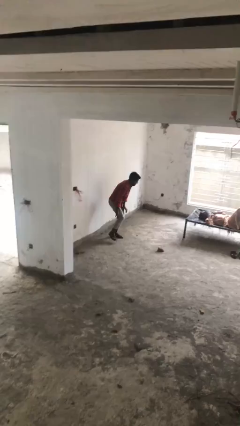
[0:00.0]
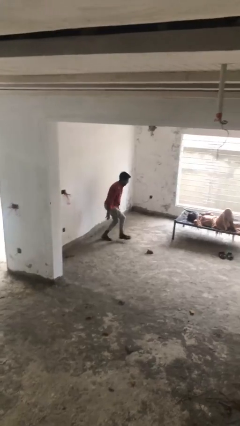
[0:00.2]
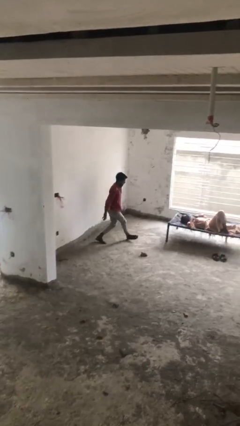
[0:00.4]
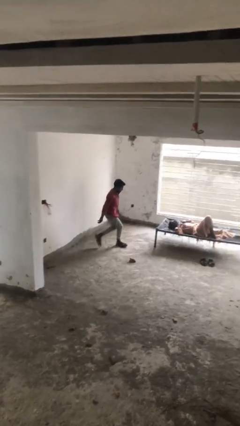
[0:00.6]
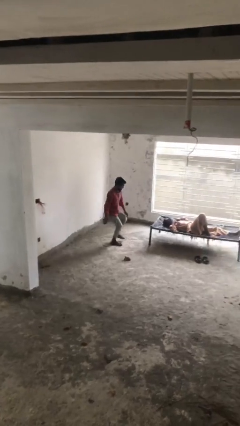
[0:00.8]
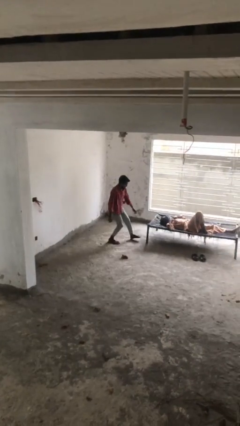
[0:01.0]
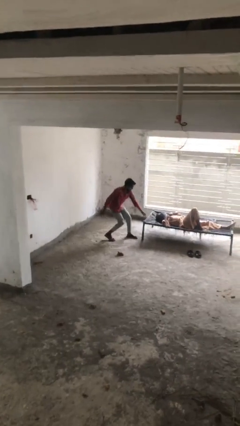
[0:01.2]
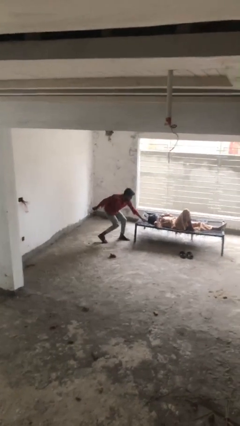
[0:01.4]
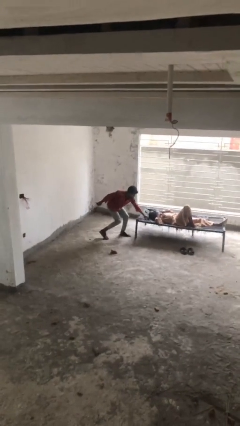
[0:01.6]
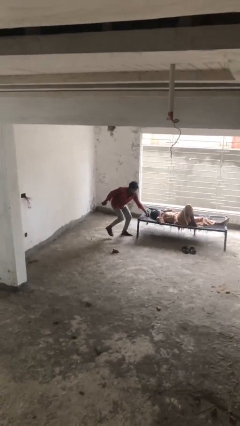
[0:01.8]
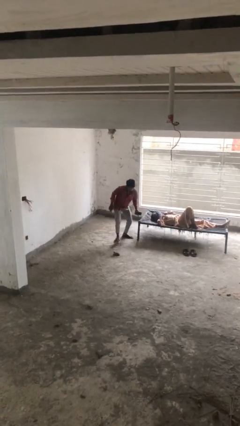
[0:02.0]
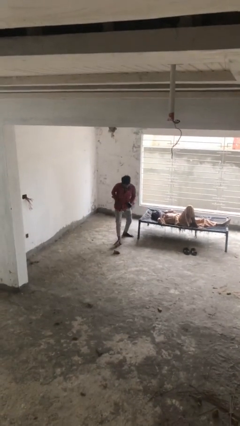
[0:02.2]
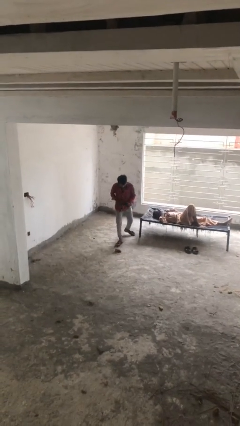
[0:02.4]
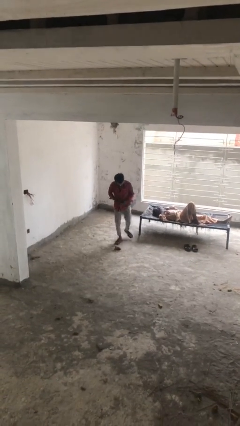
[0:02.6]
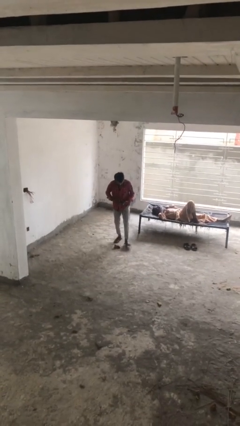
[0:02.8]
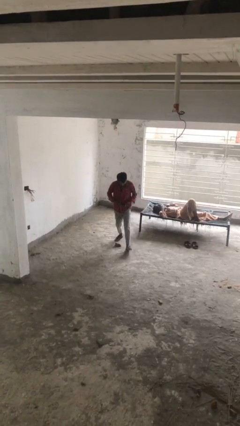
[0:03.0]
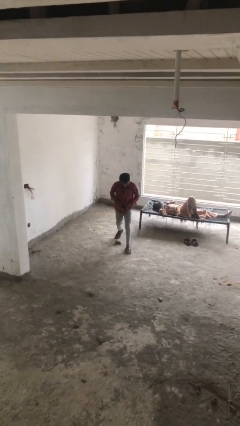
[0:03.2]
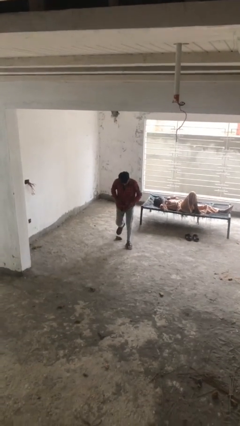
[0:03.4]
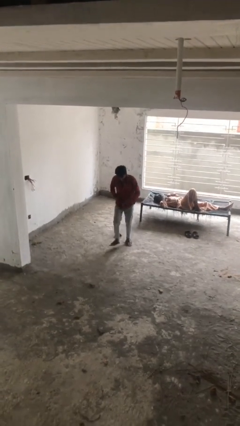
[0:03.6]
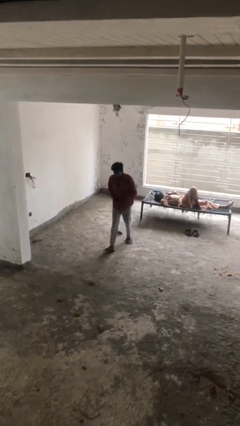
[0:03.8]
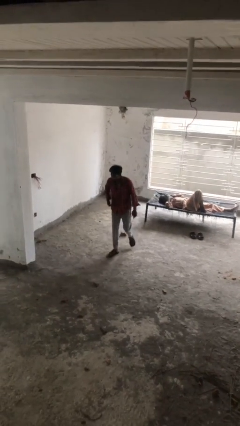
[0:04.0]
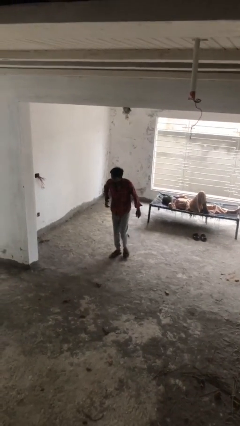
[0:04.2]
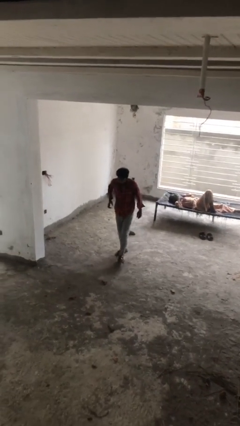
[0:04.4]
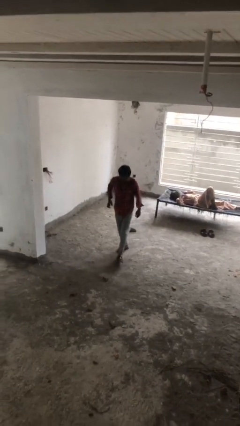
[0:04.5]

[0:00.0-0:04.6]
person steals object from person

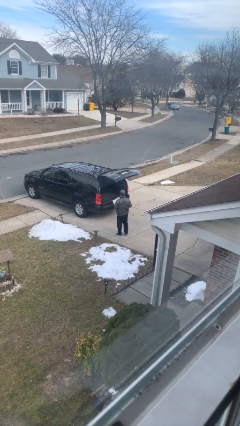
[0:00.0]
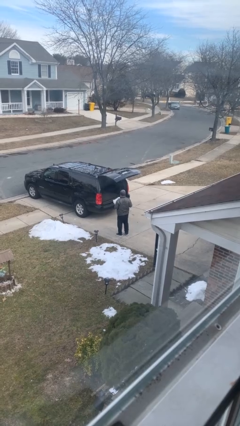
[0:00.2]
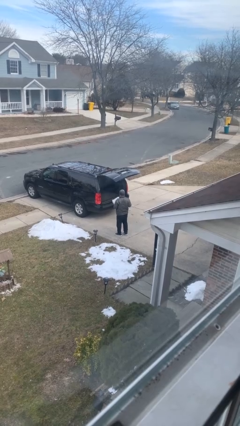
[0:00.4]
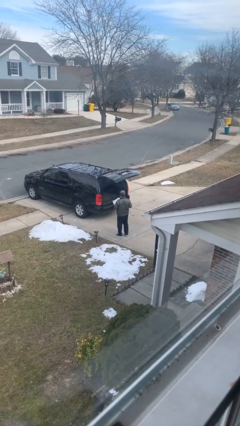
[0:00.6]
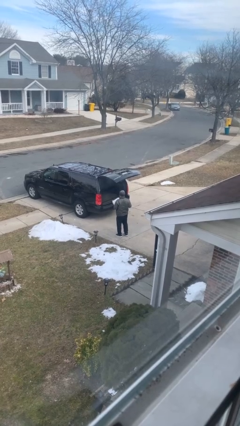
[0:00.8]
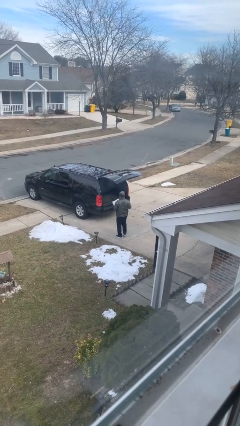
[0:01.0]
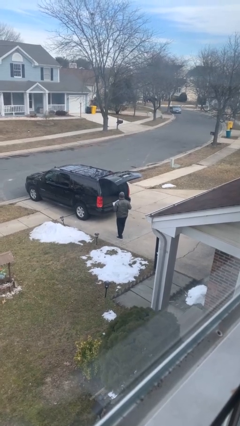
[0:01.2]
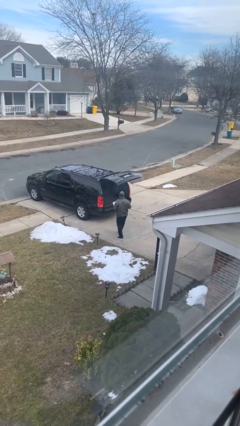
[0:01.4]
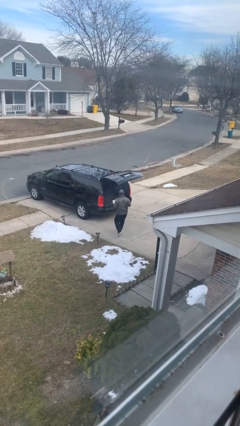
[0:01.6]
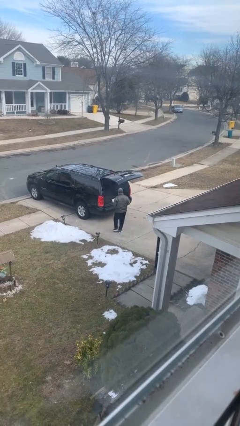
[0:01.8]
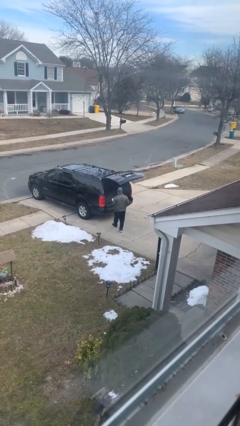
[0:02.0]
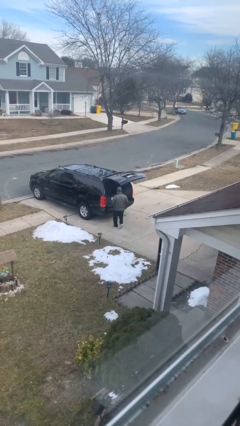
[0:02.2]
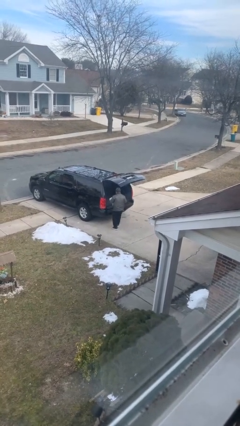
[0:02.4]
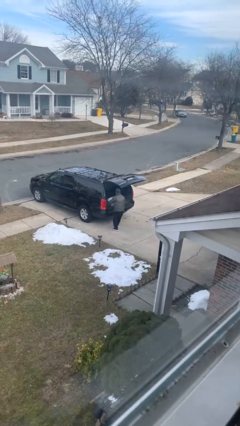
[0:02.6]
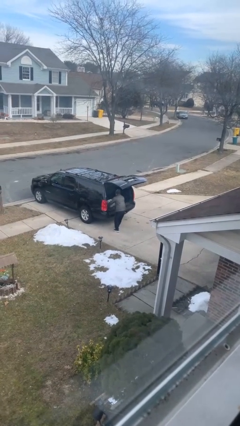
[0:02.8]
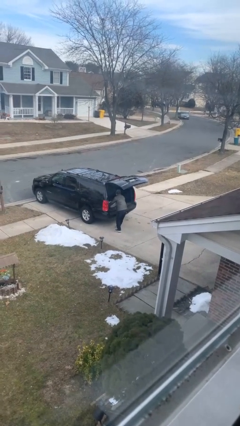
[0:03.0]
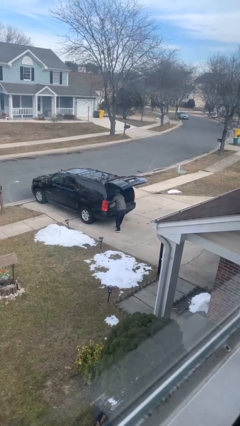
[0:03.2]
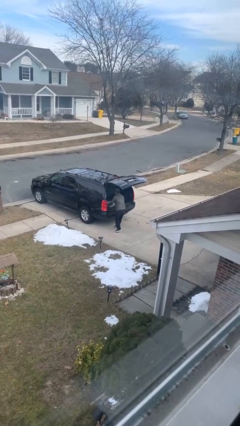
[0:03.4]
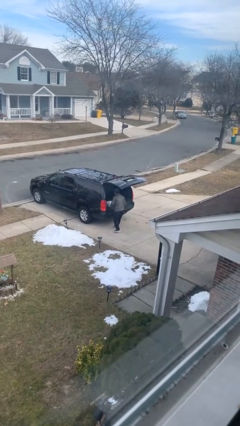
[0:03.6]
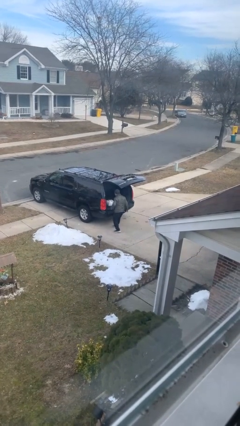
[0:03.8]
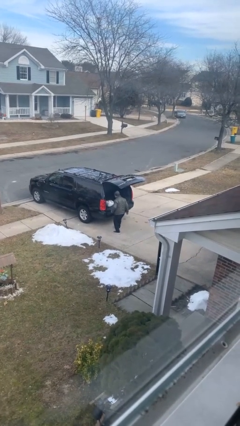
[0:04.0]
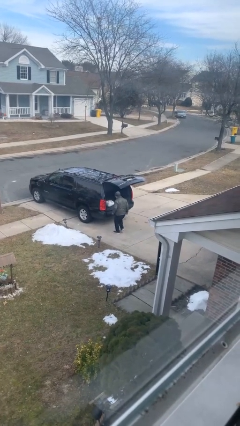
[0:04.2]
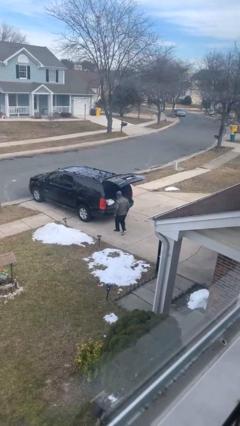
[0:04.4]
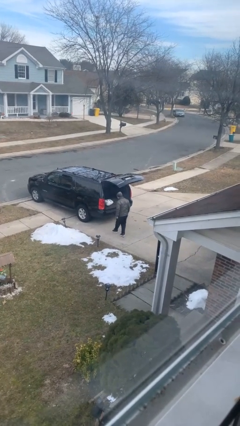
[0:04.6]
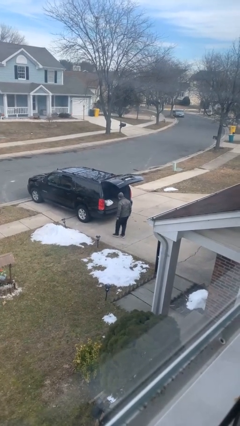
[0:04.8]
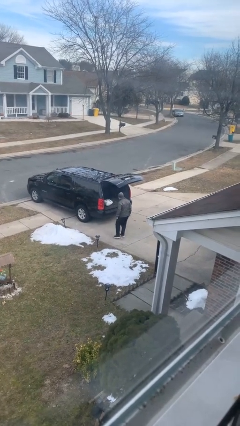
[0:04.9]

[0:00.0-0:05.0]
person loads car

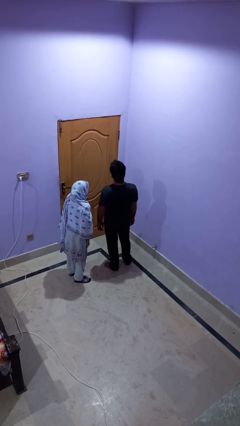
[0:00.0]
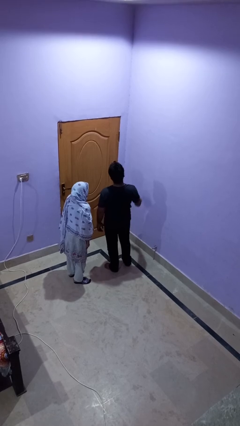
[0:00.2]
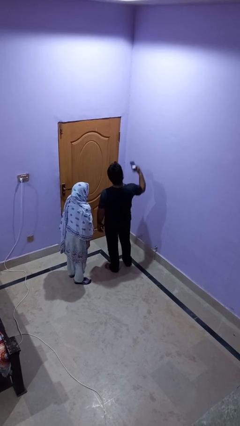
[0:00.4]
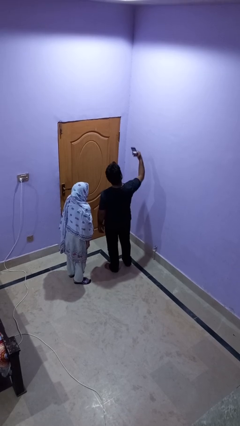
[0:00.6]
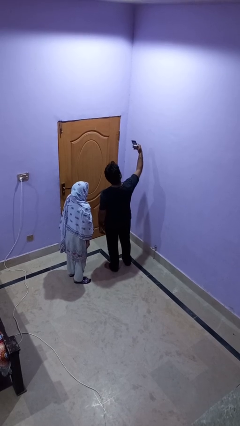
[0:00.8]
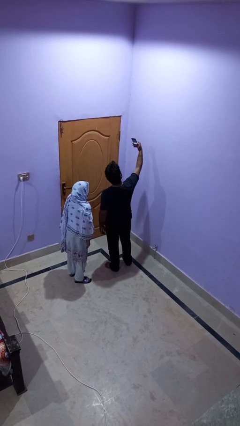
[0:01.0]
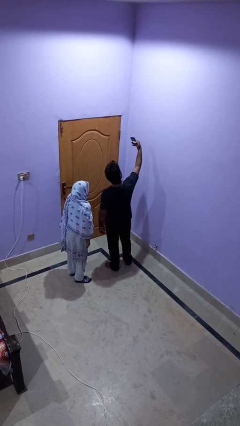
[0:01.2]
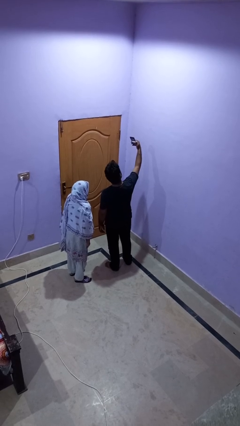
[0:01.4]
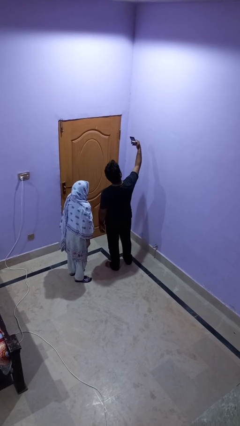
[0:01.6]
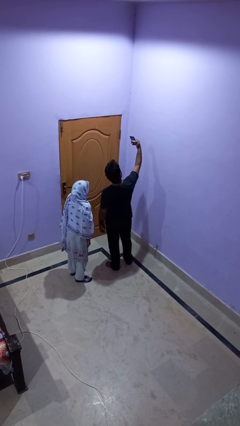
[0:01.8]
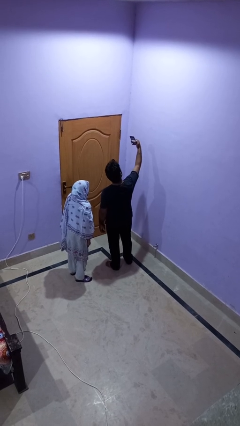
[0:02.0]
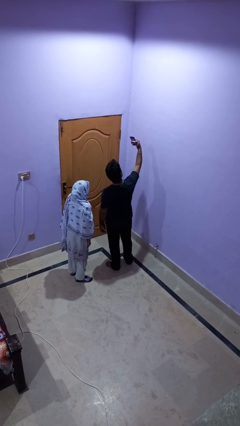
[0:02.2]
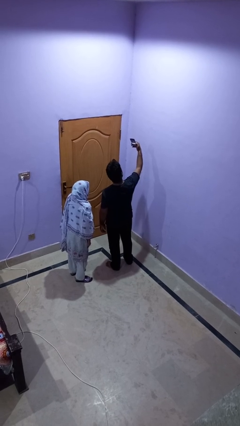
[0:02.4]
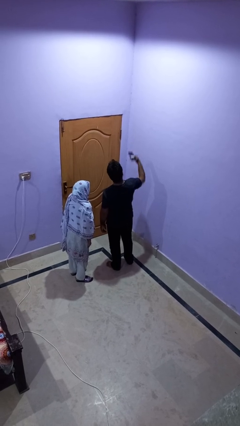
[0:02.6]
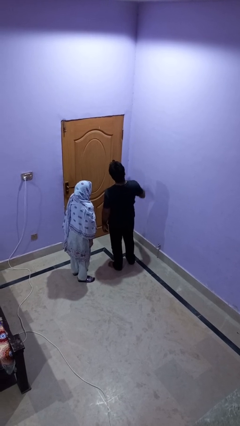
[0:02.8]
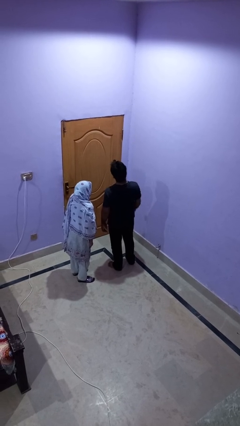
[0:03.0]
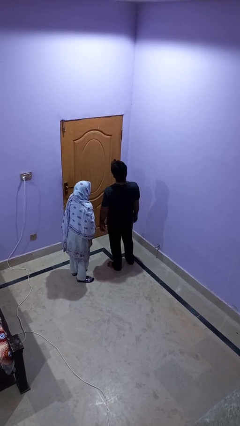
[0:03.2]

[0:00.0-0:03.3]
person takes selfie with person

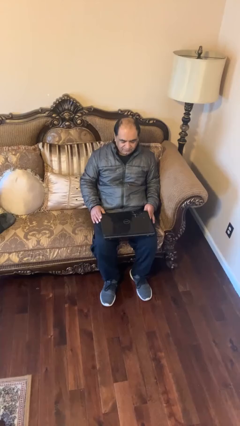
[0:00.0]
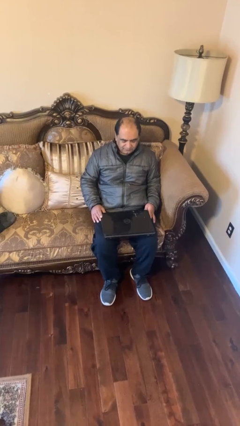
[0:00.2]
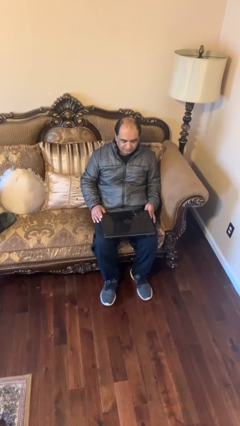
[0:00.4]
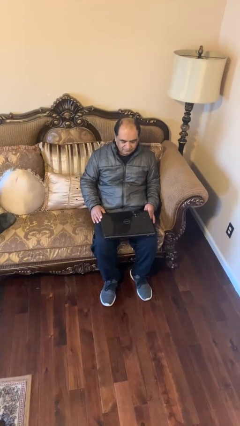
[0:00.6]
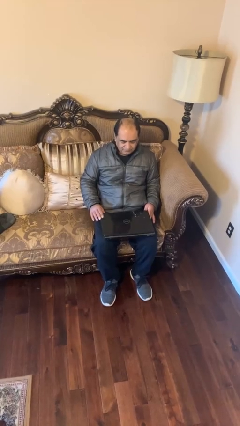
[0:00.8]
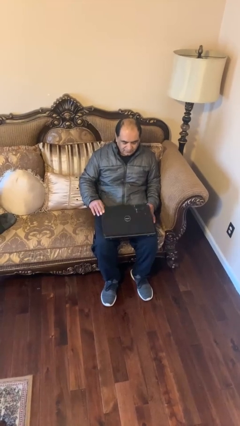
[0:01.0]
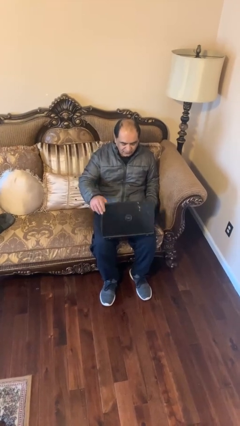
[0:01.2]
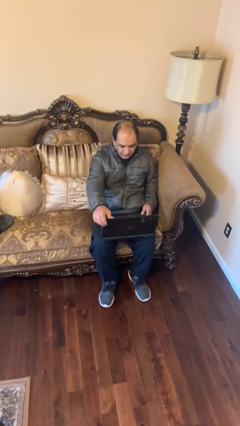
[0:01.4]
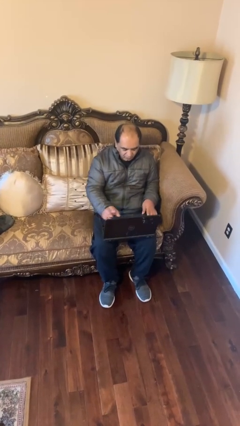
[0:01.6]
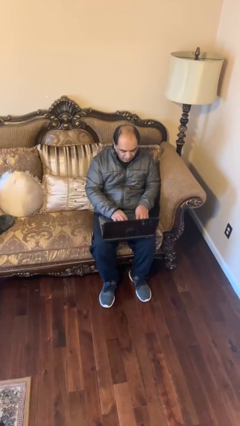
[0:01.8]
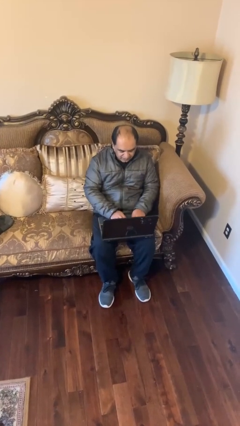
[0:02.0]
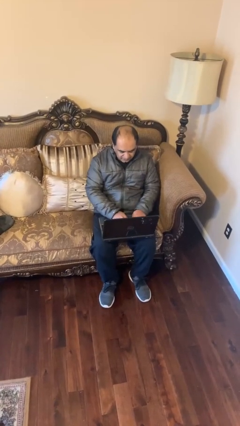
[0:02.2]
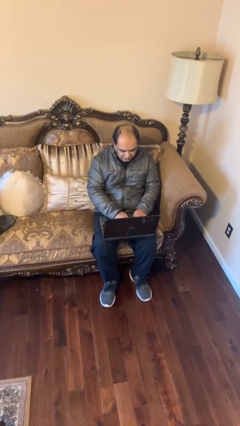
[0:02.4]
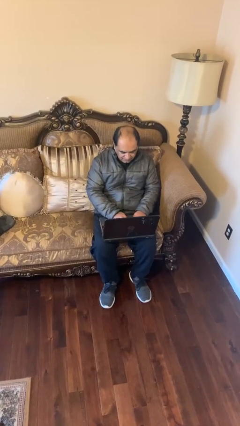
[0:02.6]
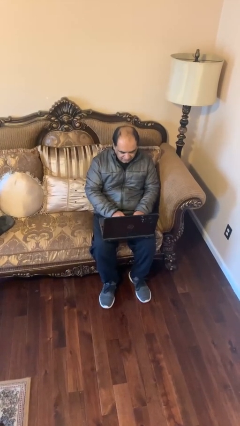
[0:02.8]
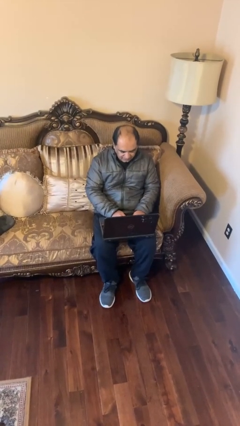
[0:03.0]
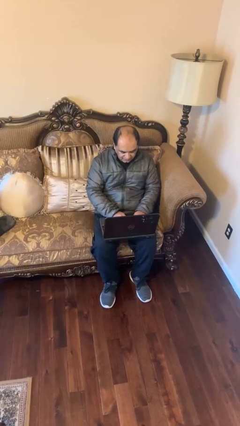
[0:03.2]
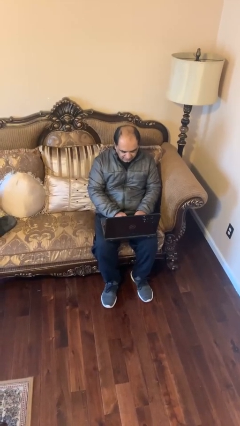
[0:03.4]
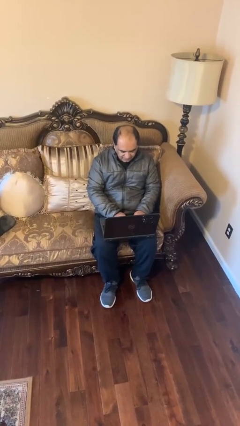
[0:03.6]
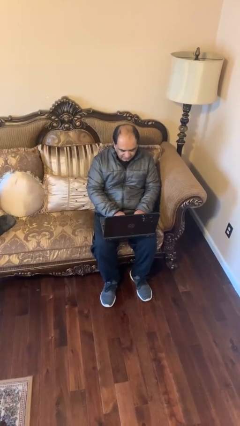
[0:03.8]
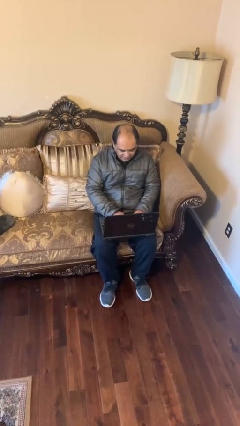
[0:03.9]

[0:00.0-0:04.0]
person interacts with laptop

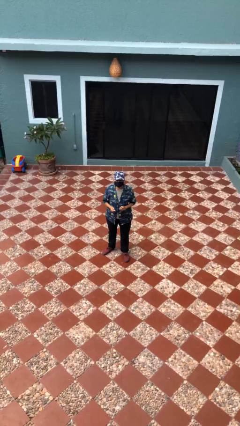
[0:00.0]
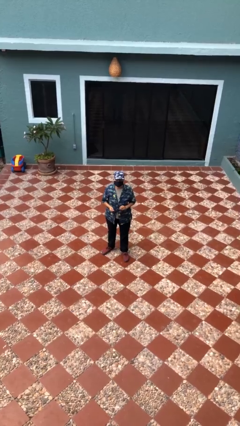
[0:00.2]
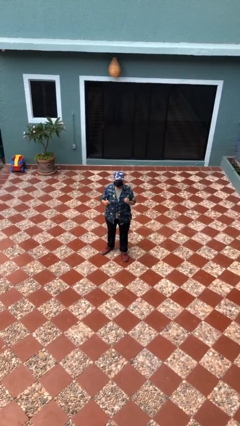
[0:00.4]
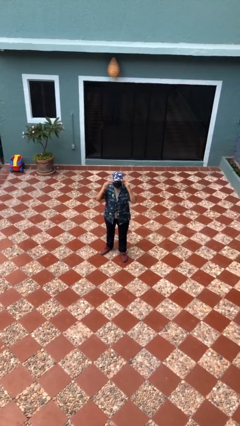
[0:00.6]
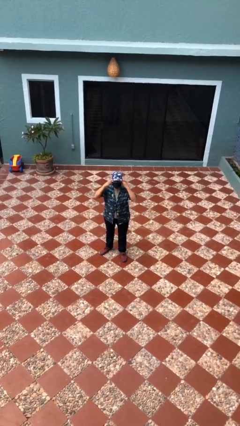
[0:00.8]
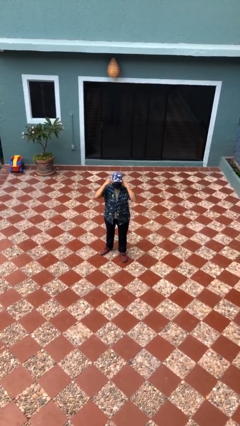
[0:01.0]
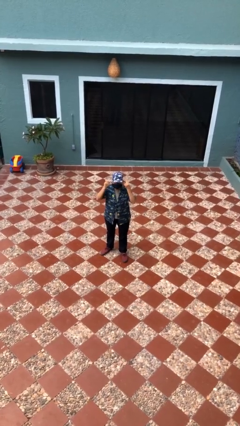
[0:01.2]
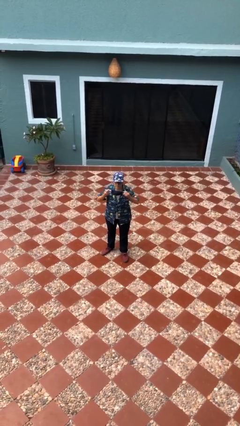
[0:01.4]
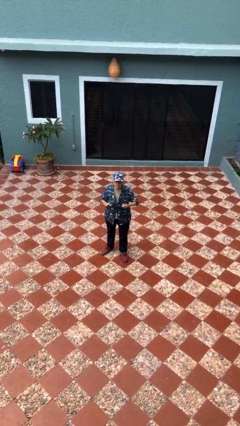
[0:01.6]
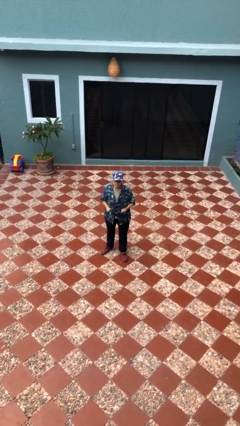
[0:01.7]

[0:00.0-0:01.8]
person takes off facemask
